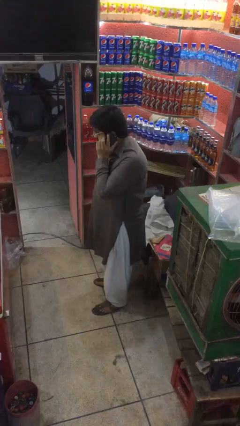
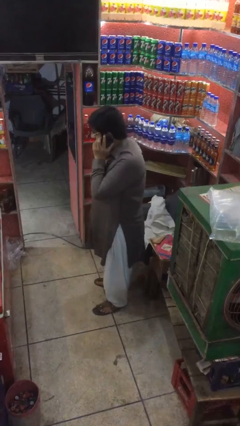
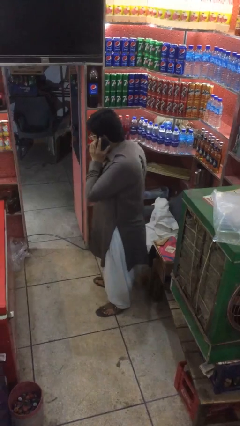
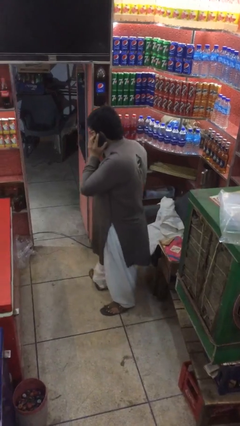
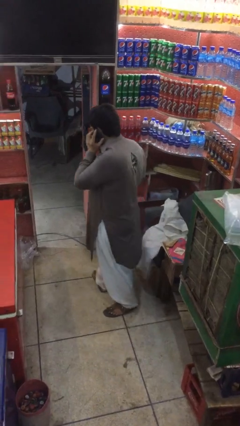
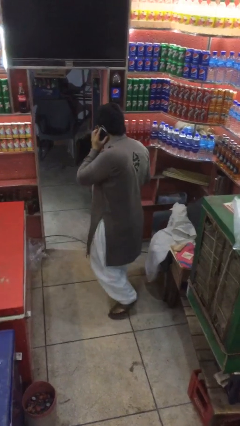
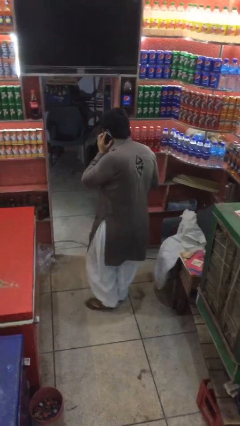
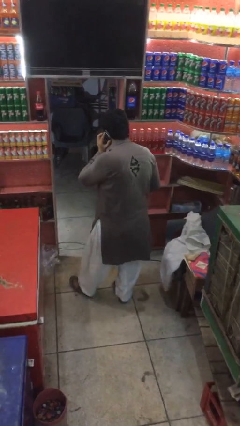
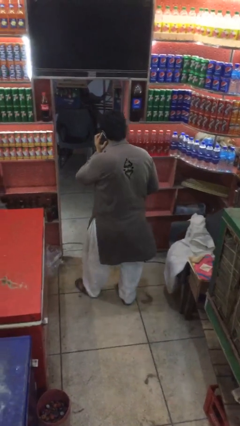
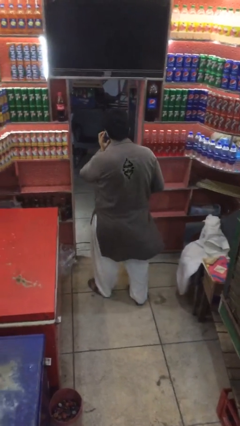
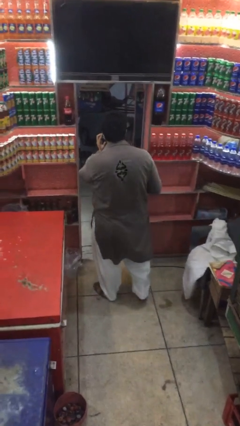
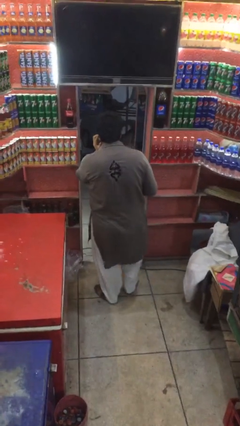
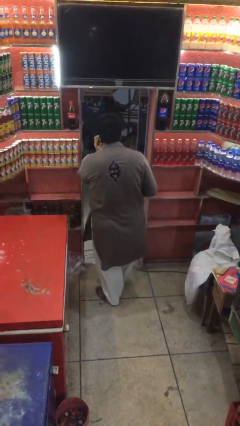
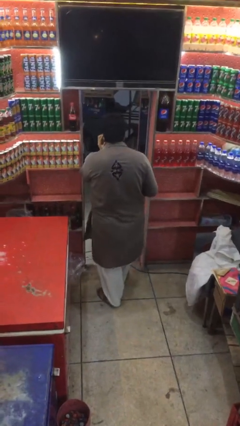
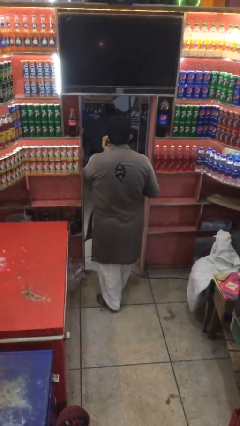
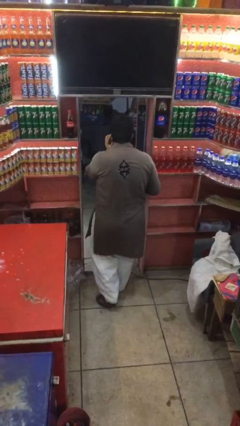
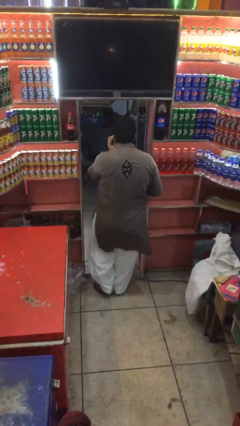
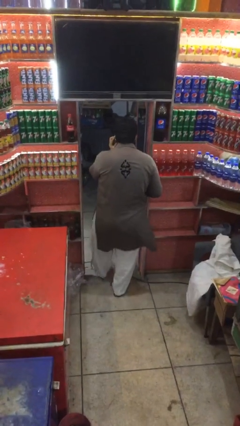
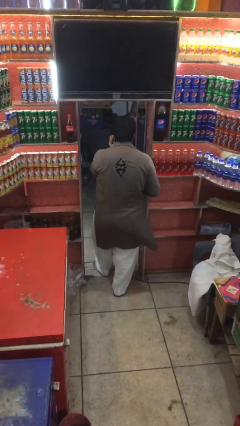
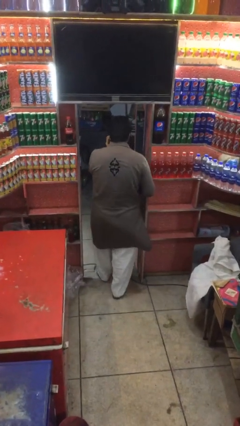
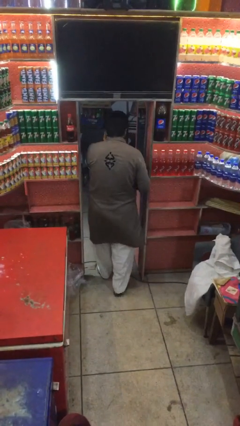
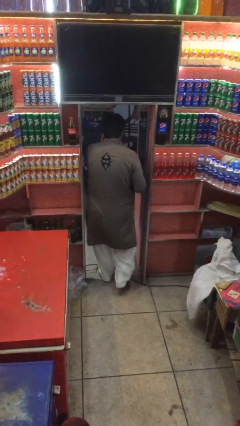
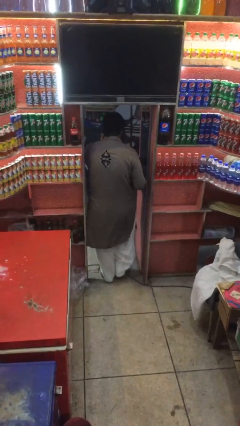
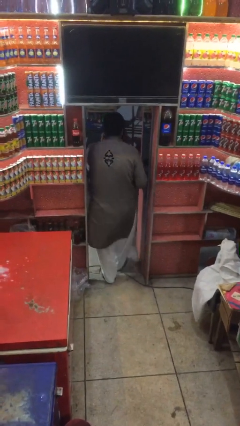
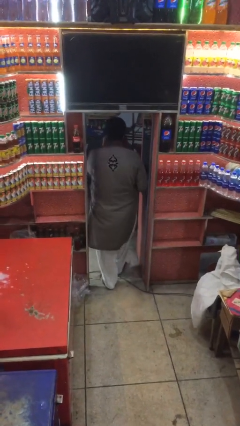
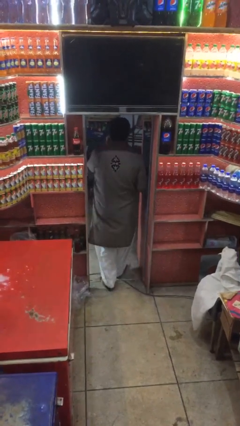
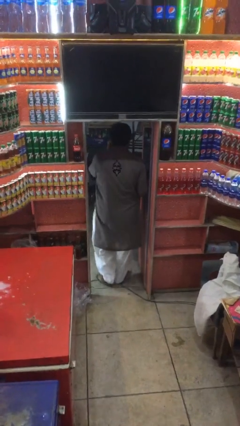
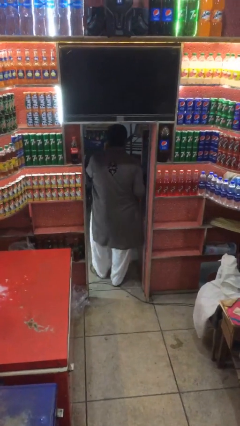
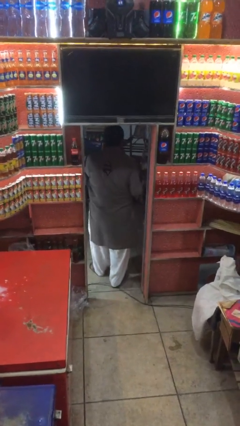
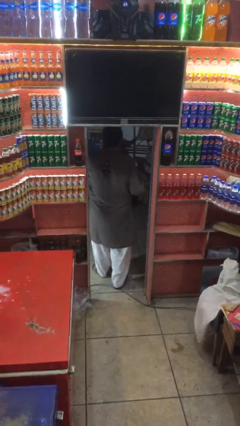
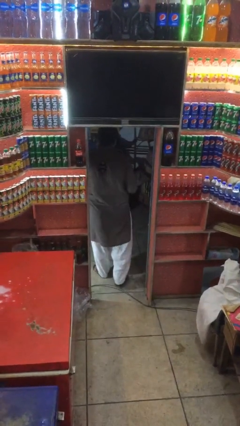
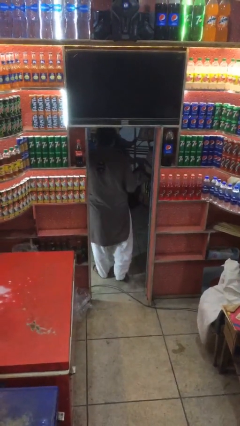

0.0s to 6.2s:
person exits scene through structure

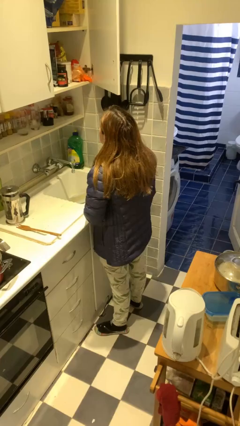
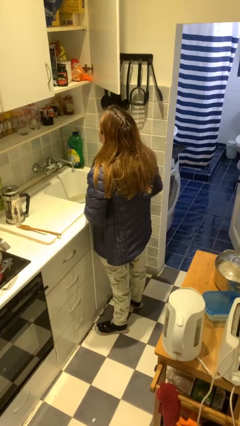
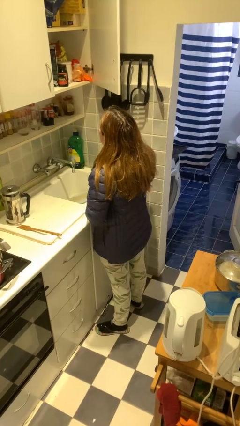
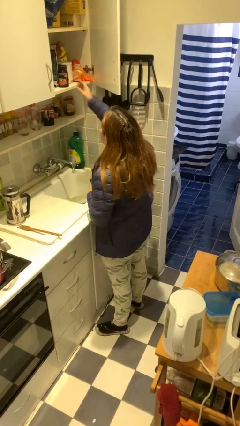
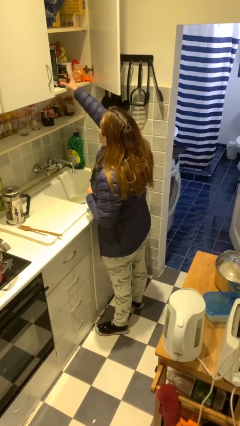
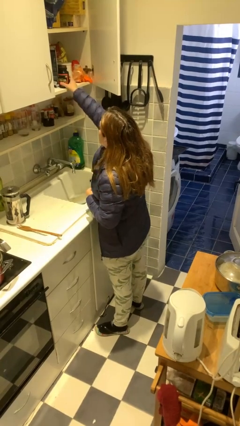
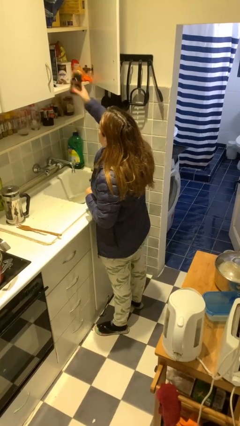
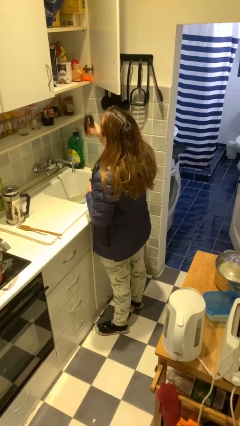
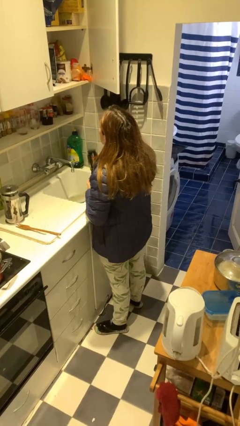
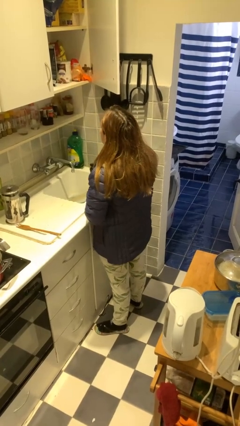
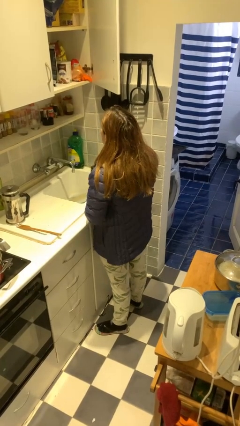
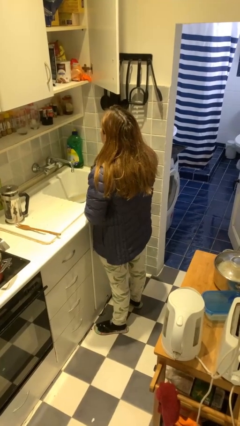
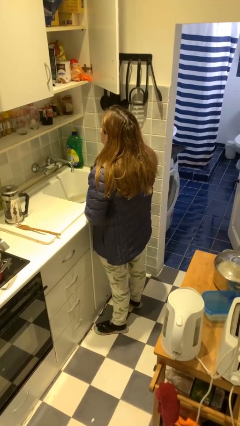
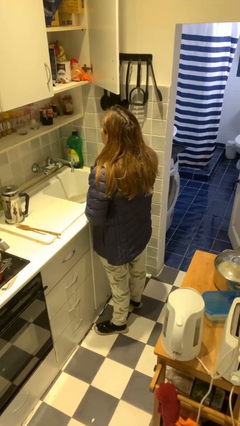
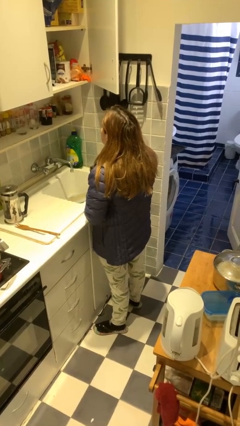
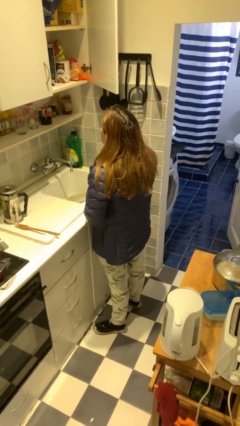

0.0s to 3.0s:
person takes object from cabinet

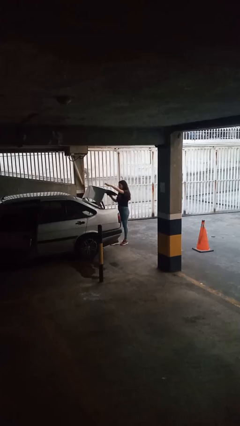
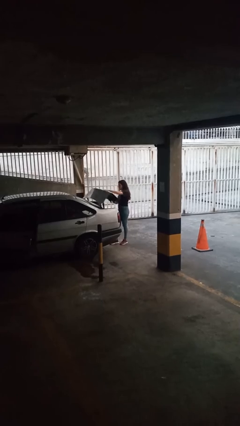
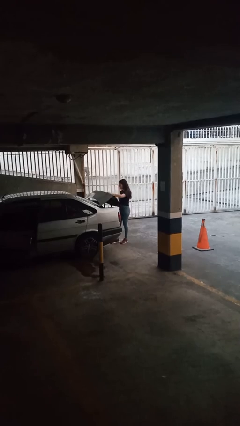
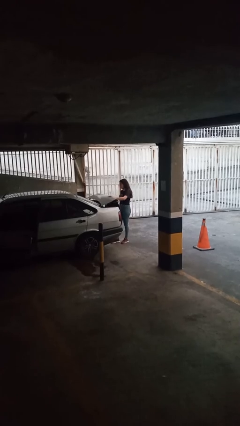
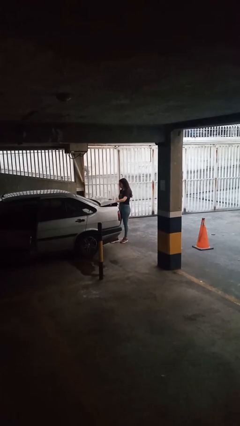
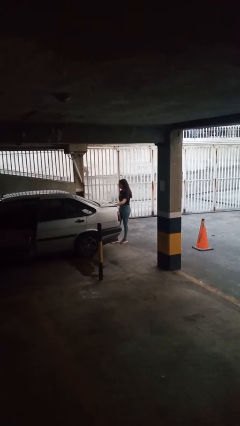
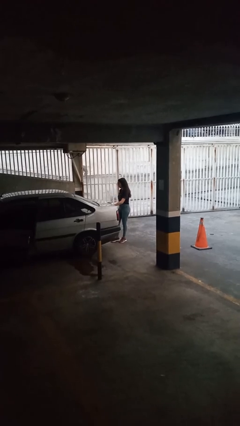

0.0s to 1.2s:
person closes car trunk

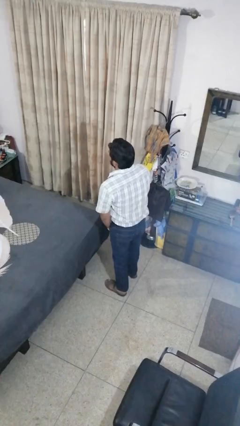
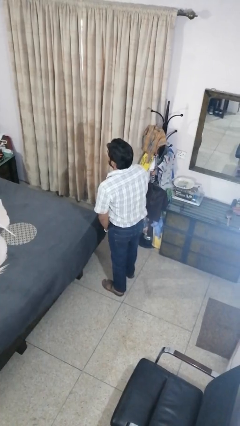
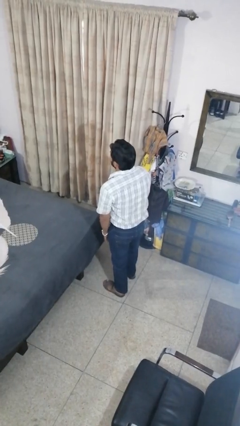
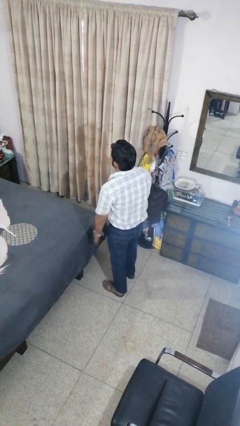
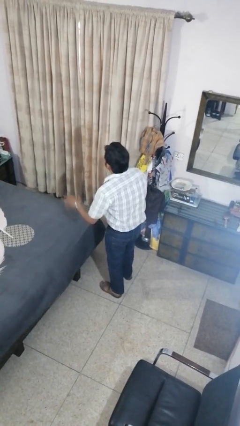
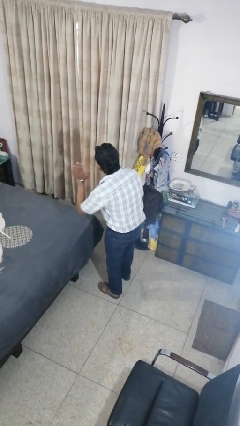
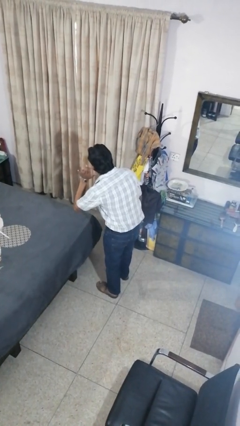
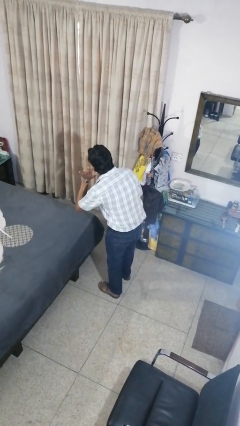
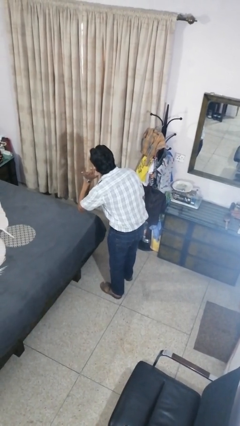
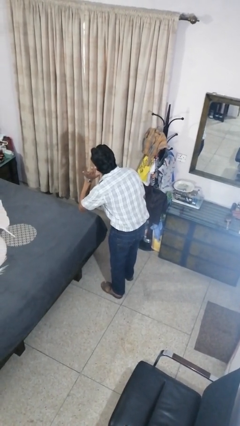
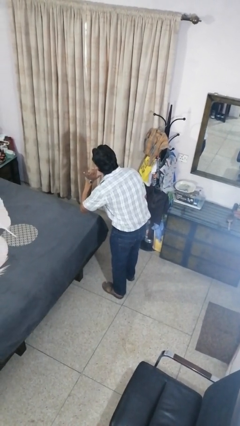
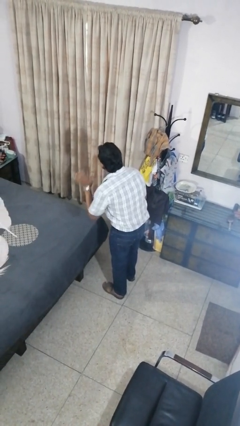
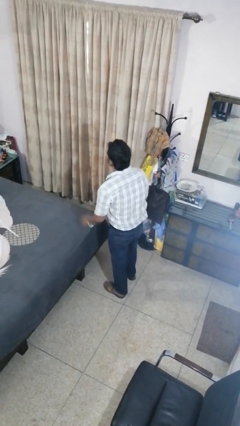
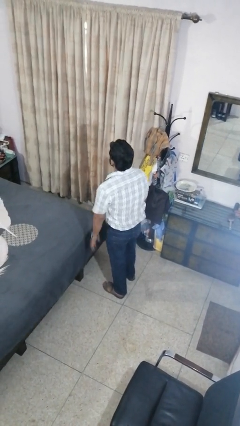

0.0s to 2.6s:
person gestures listen closely

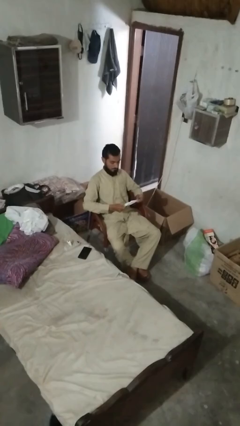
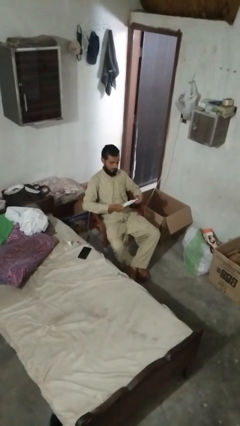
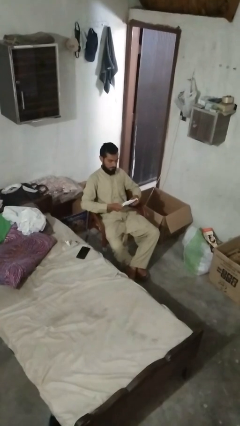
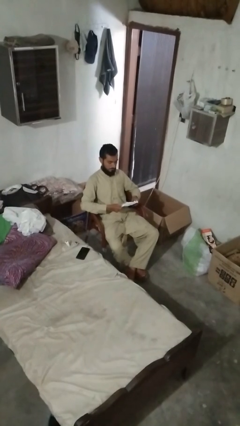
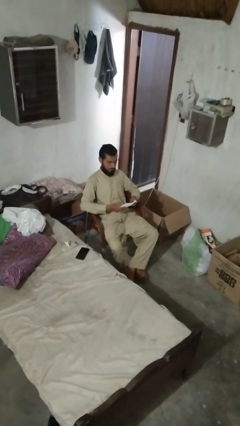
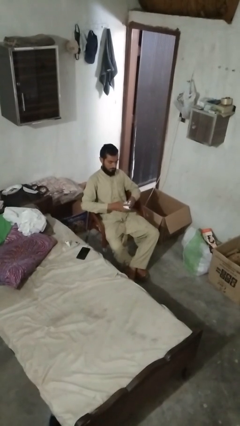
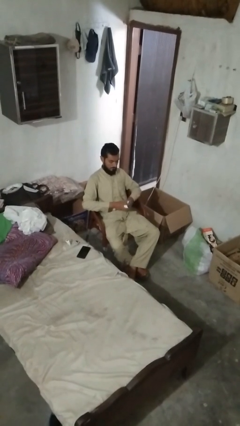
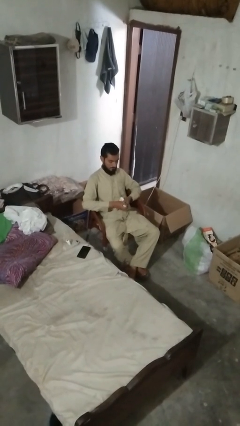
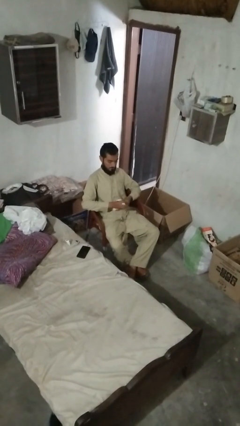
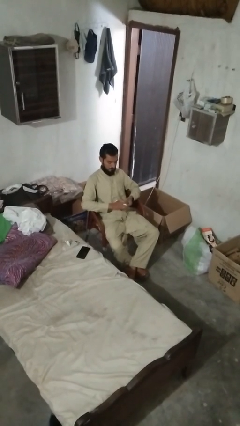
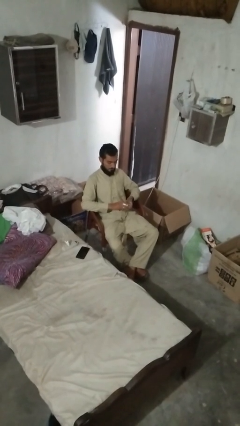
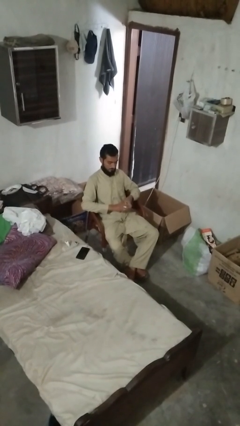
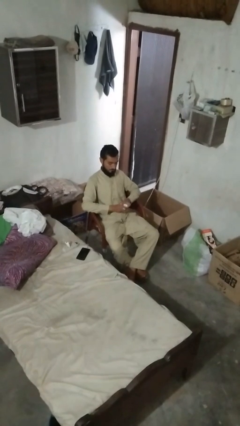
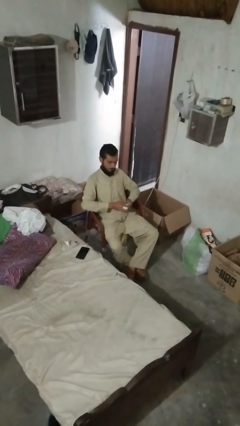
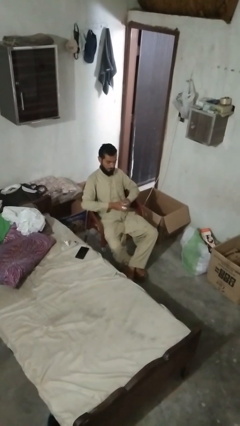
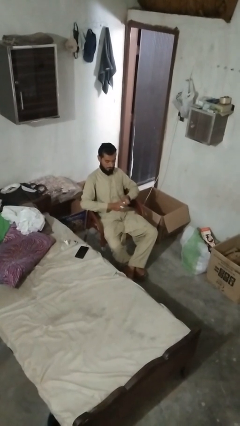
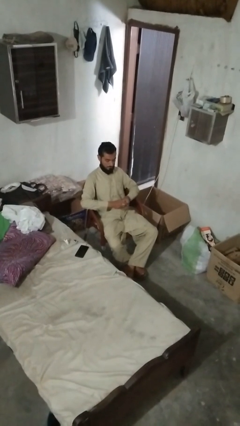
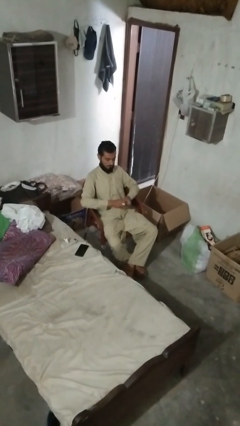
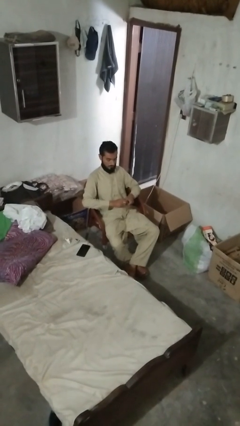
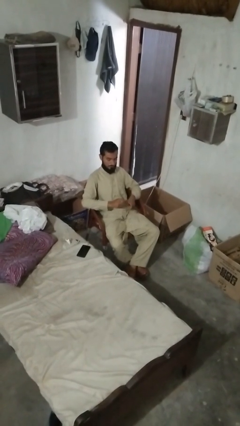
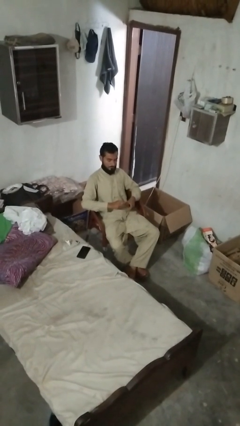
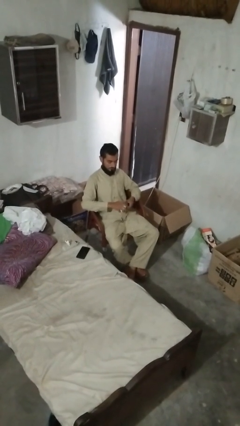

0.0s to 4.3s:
person crumples paper

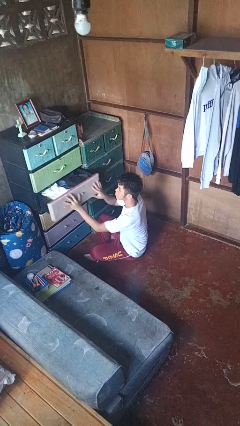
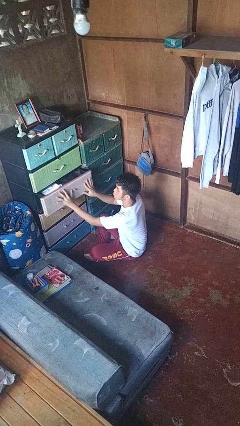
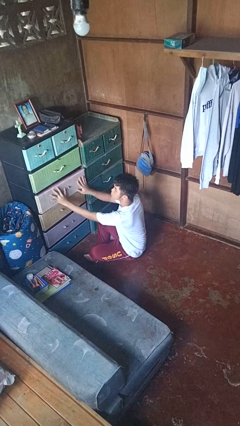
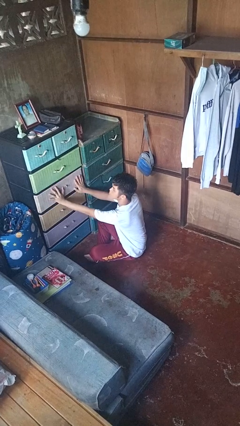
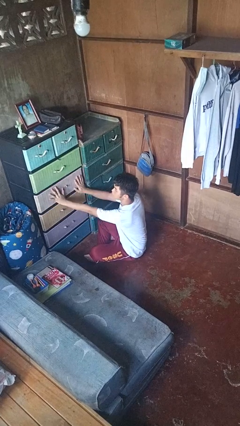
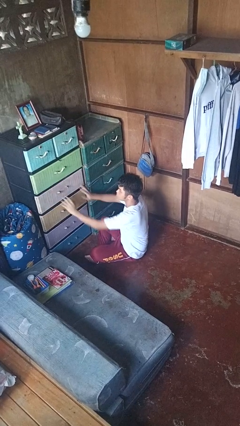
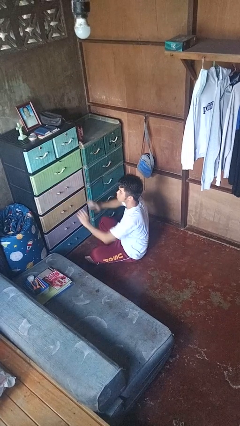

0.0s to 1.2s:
person closes dresser drawer
